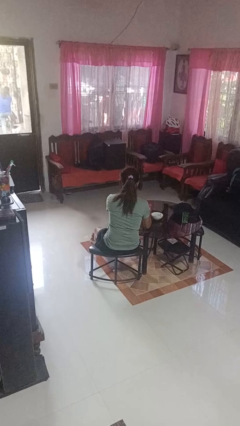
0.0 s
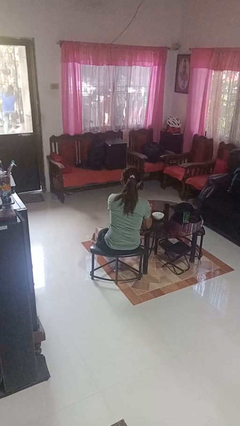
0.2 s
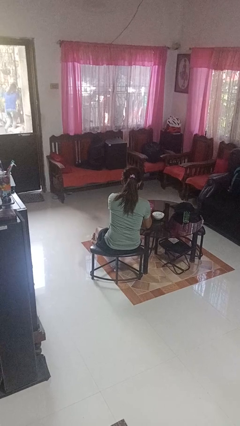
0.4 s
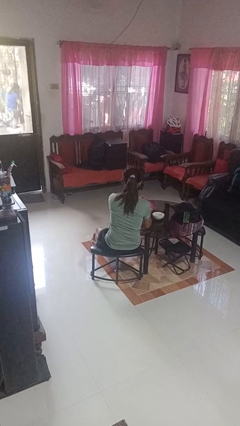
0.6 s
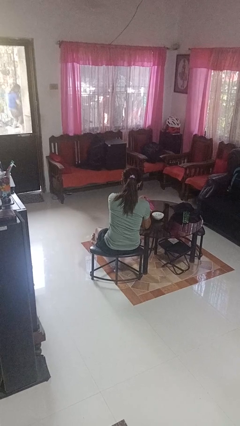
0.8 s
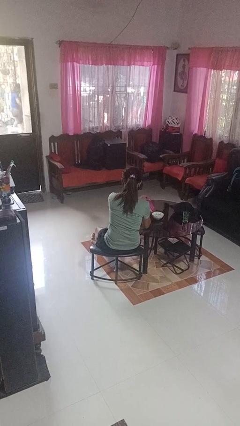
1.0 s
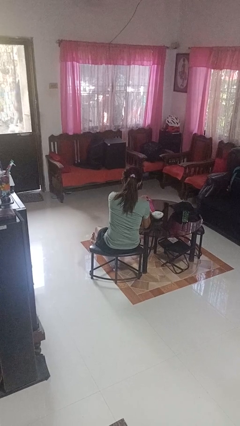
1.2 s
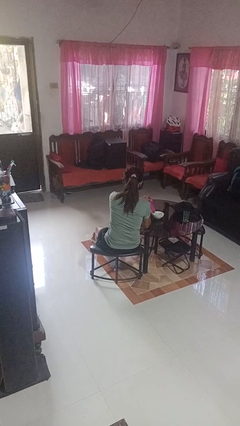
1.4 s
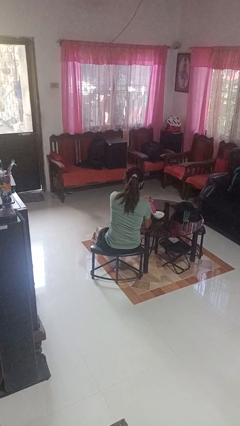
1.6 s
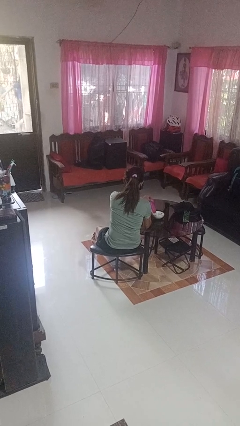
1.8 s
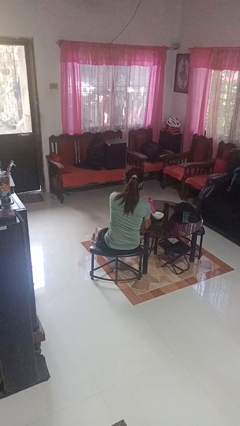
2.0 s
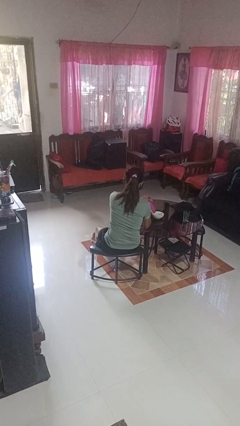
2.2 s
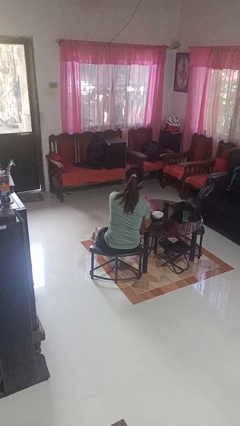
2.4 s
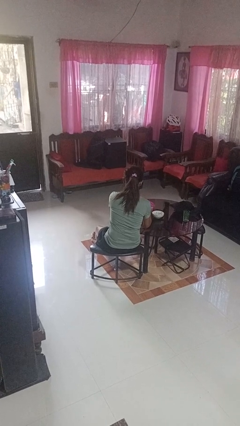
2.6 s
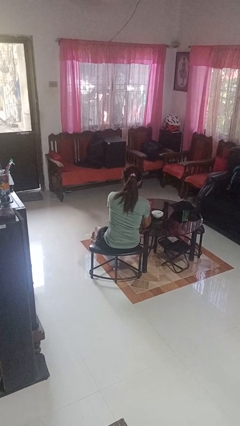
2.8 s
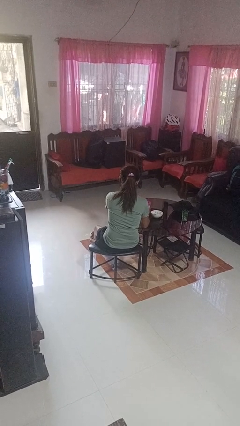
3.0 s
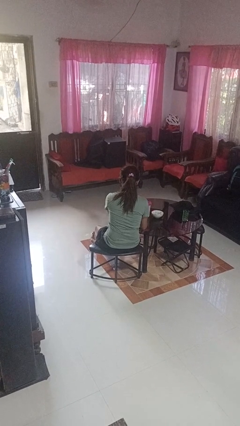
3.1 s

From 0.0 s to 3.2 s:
person pours into bowl

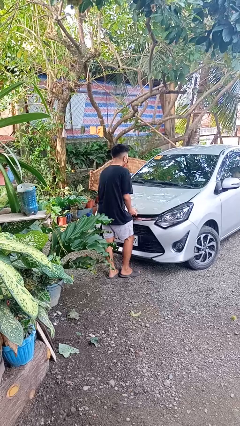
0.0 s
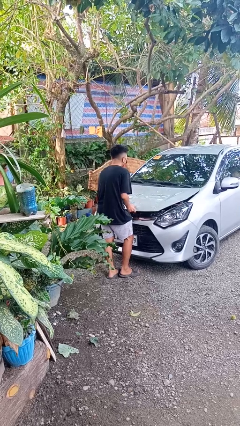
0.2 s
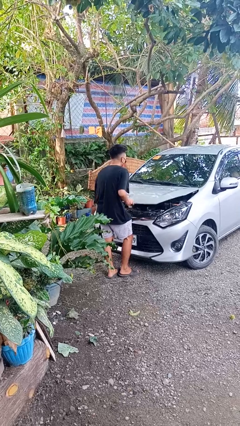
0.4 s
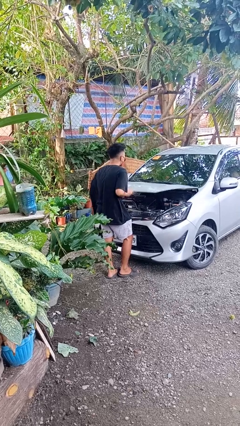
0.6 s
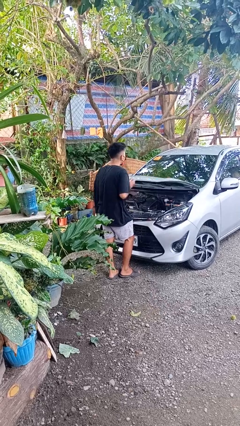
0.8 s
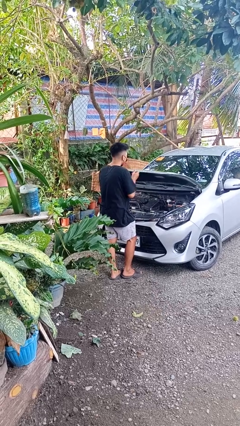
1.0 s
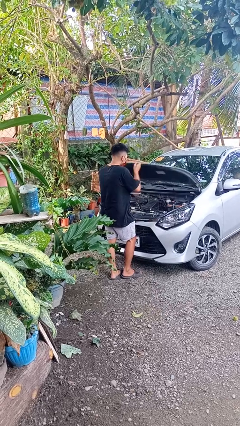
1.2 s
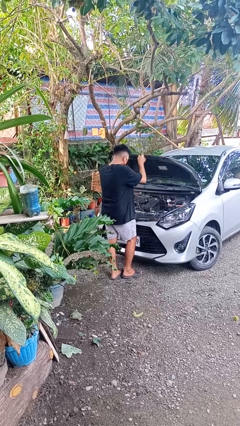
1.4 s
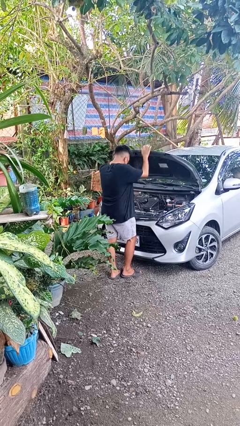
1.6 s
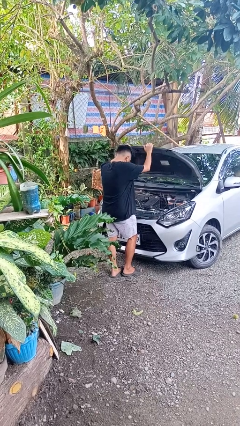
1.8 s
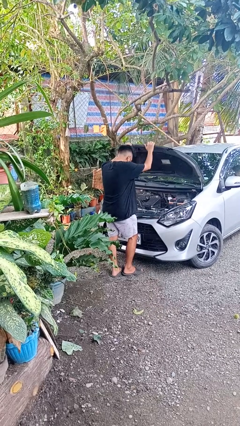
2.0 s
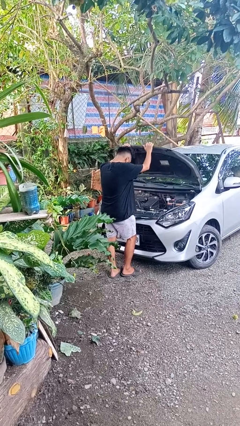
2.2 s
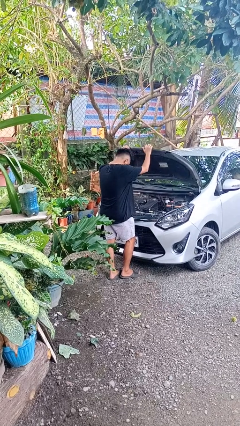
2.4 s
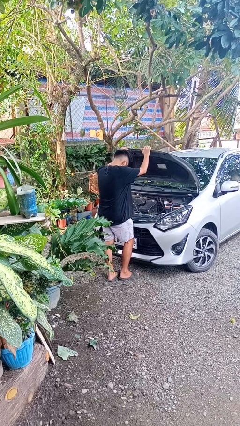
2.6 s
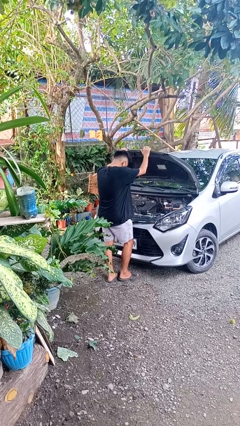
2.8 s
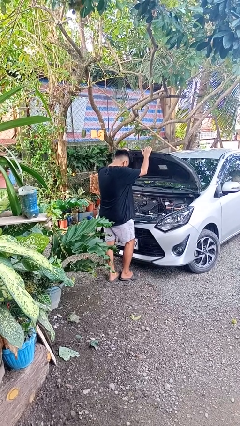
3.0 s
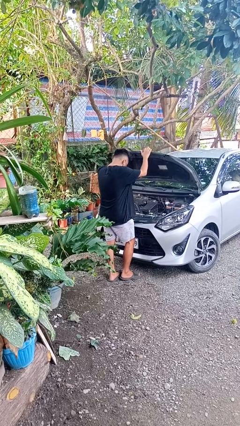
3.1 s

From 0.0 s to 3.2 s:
person opens car hood

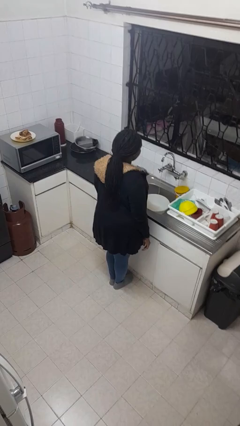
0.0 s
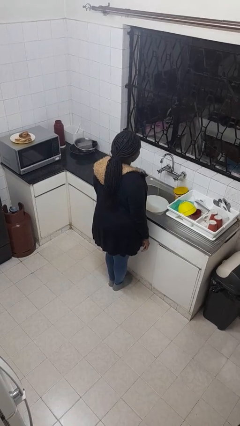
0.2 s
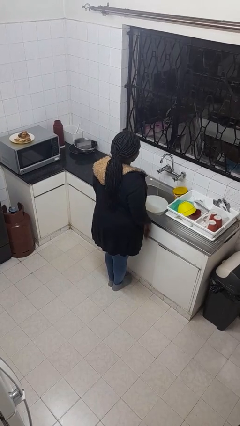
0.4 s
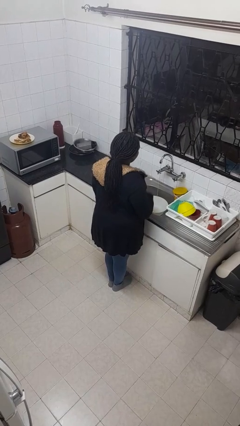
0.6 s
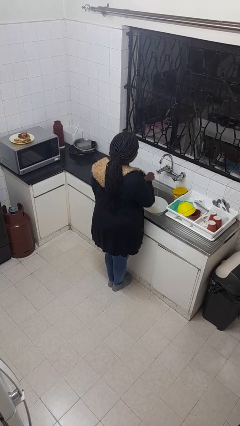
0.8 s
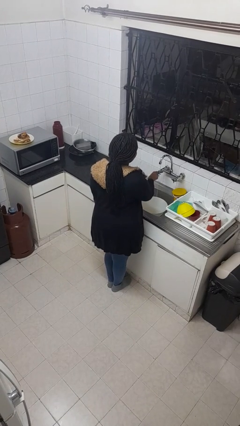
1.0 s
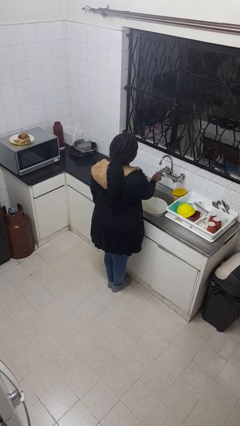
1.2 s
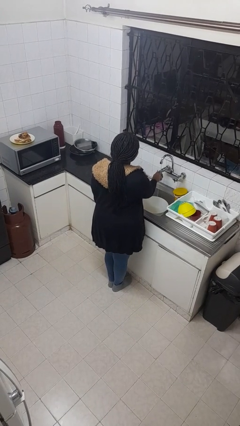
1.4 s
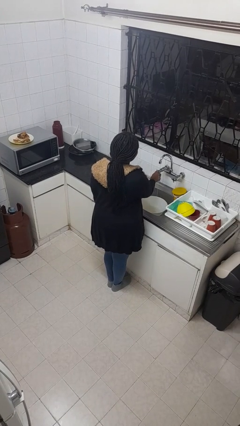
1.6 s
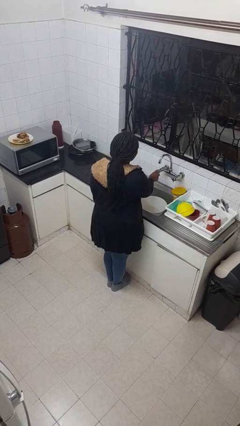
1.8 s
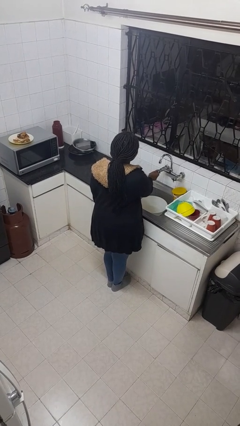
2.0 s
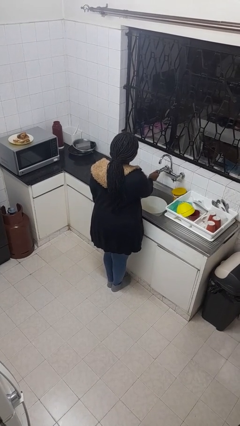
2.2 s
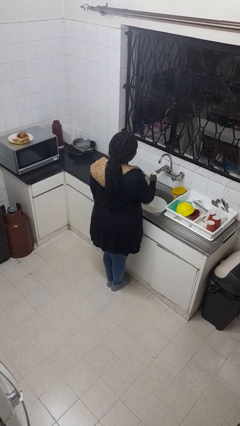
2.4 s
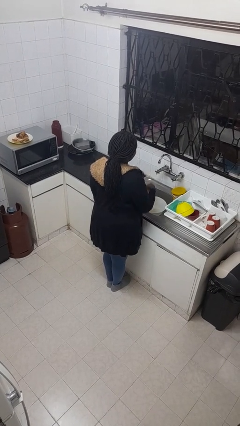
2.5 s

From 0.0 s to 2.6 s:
person turns off faucet

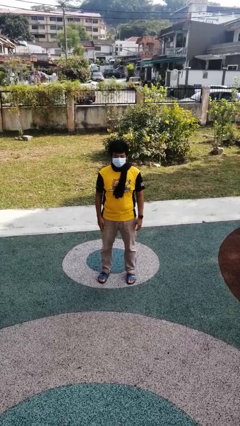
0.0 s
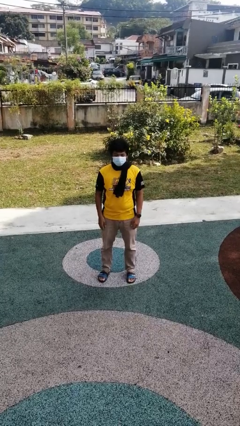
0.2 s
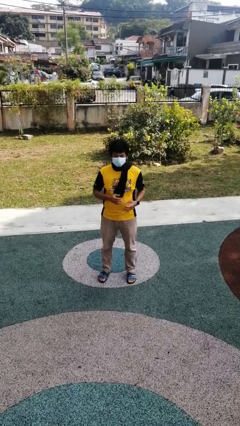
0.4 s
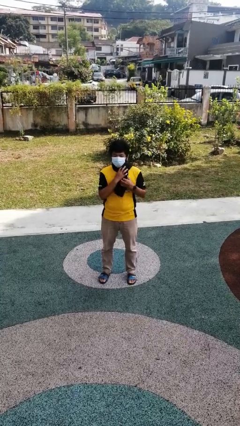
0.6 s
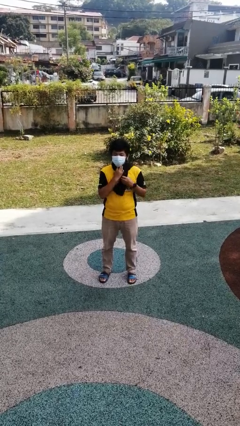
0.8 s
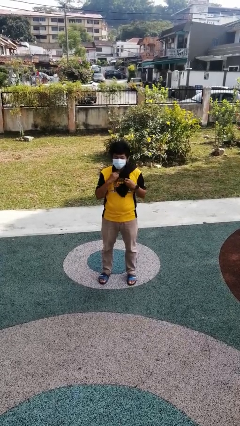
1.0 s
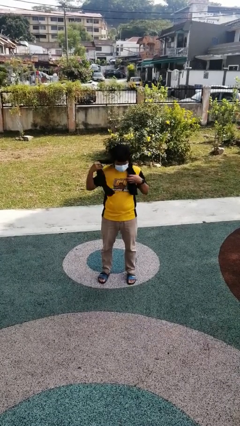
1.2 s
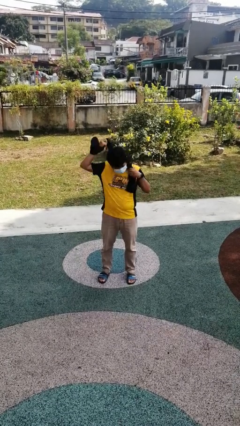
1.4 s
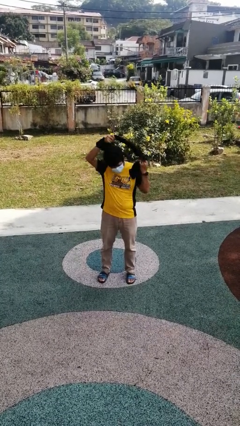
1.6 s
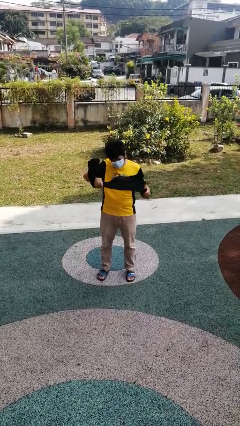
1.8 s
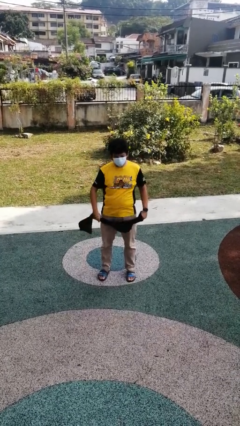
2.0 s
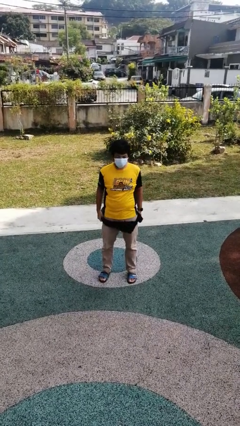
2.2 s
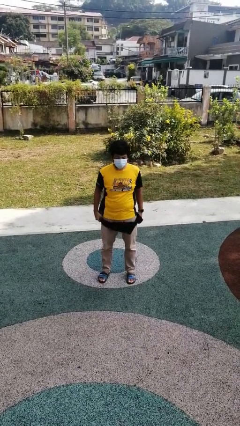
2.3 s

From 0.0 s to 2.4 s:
person takes off scarf

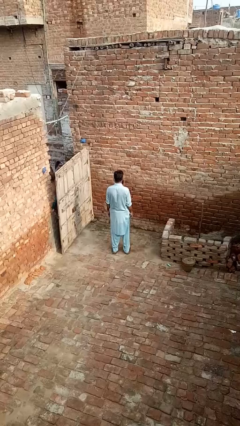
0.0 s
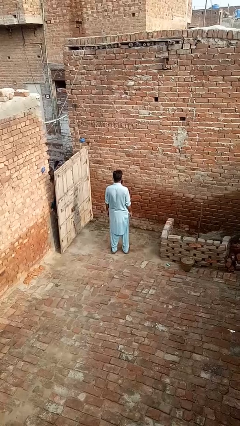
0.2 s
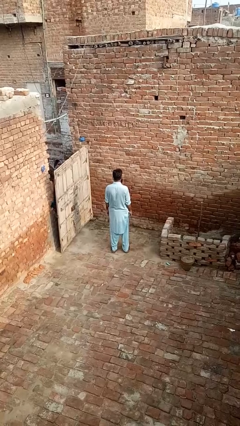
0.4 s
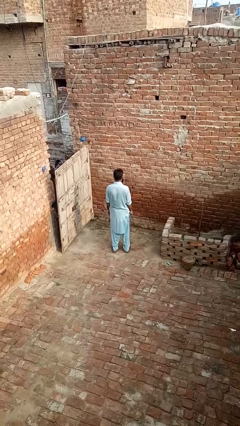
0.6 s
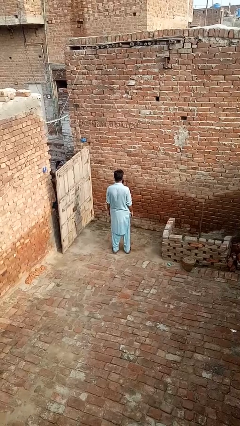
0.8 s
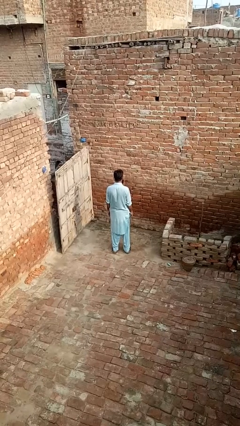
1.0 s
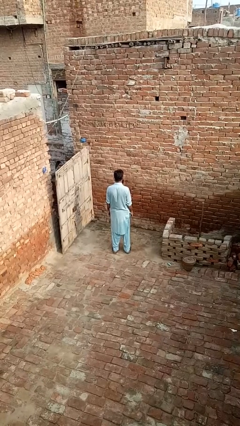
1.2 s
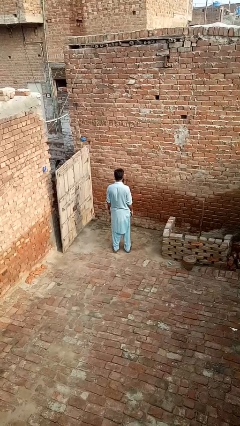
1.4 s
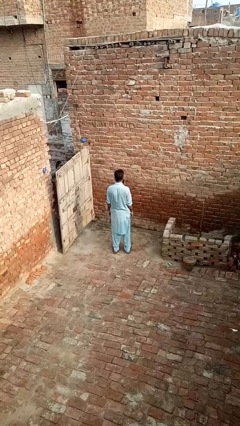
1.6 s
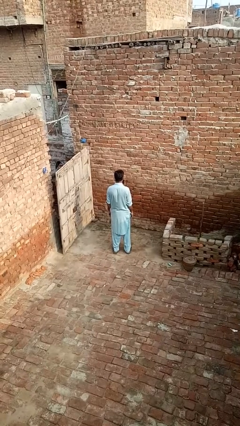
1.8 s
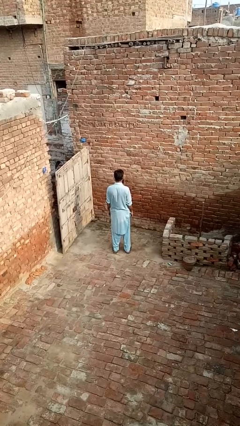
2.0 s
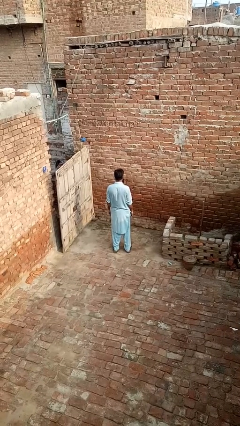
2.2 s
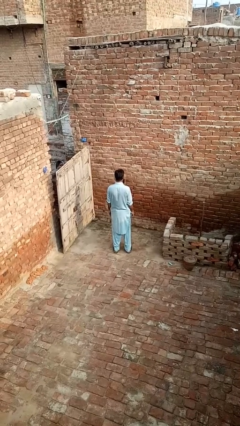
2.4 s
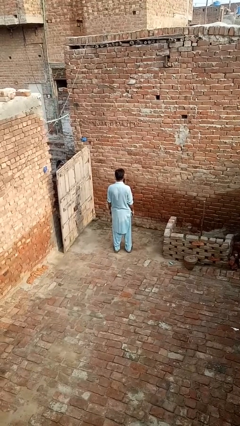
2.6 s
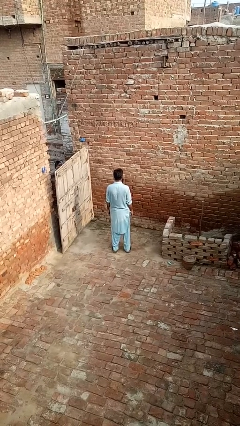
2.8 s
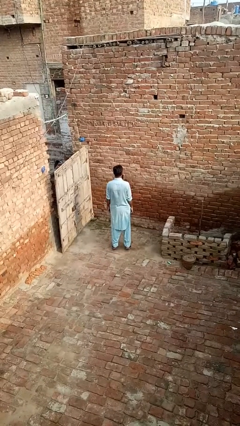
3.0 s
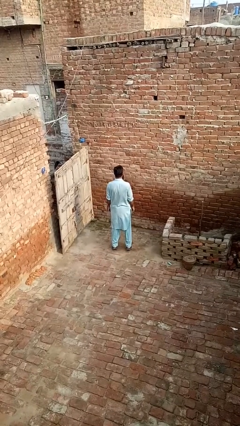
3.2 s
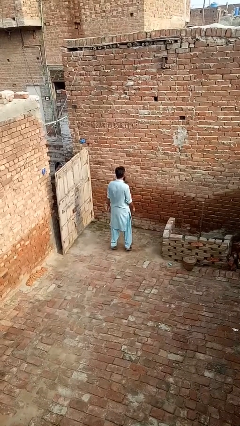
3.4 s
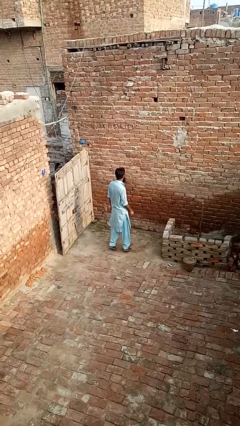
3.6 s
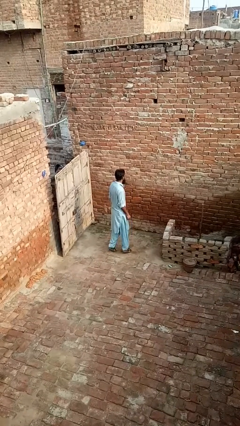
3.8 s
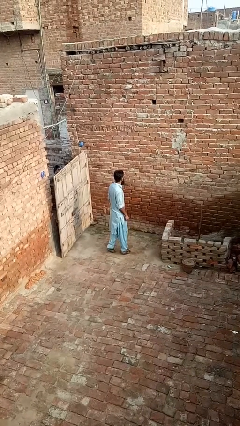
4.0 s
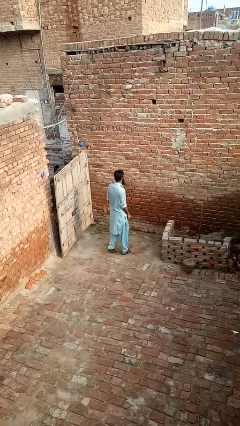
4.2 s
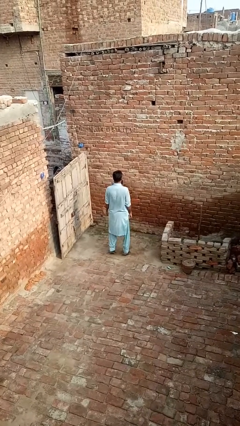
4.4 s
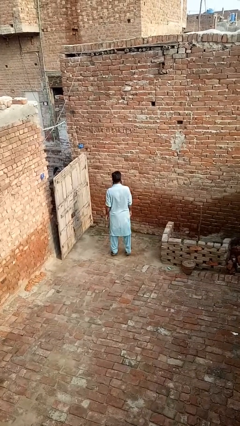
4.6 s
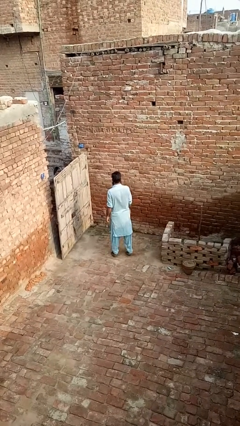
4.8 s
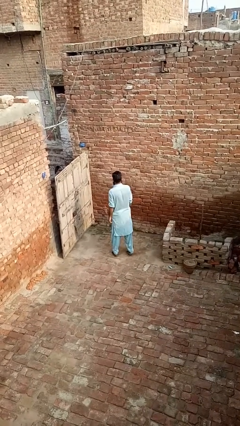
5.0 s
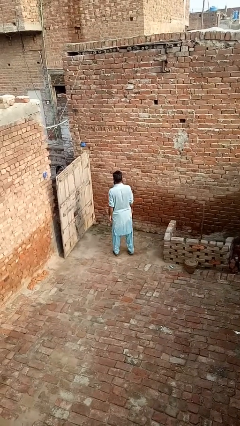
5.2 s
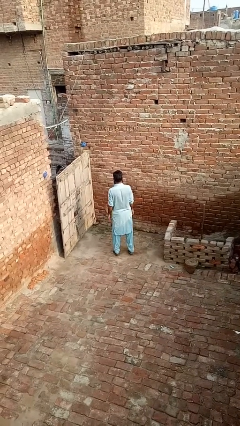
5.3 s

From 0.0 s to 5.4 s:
person twirls

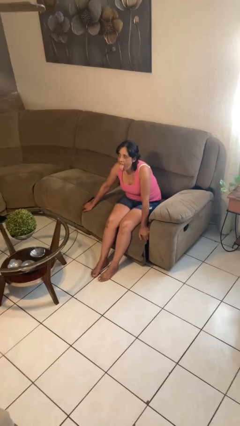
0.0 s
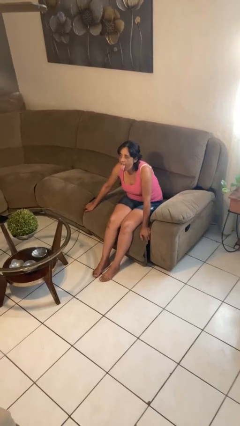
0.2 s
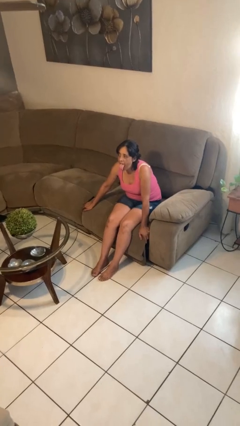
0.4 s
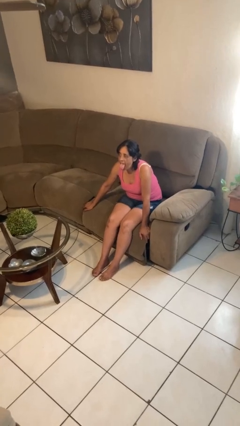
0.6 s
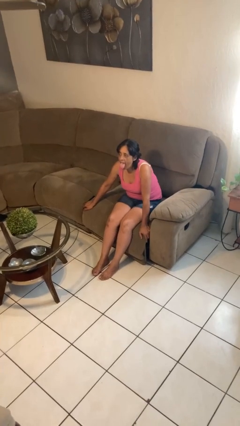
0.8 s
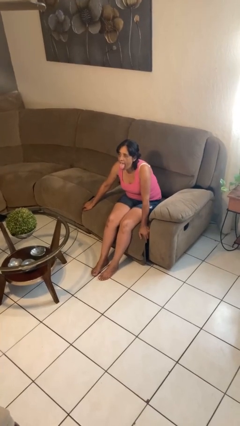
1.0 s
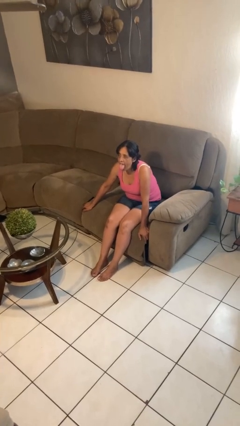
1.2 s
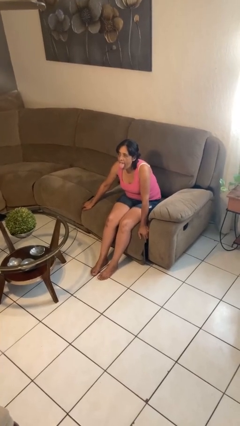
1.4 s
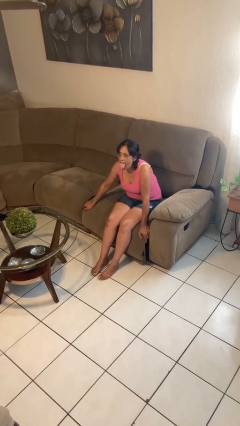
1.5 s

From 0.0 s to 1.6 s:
person sticks out tongue
